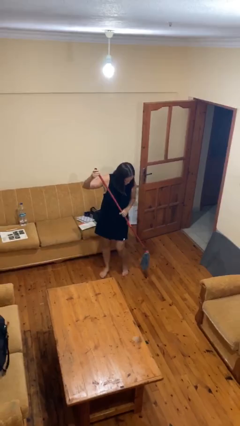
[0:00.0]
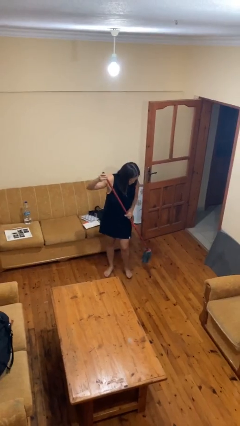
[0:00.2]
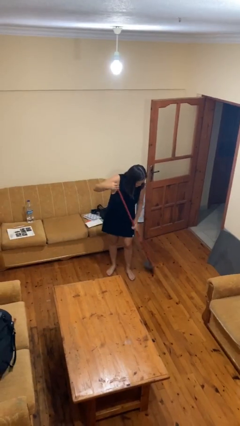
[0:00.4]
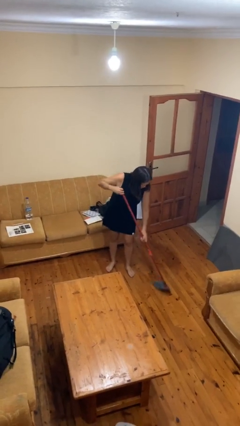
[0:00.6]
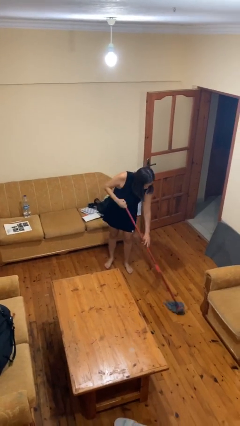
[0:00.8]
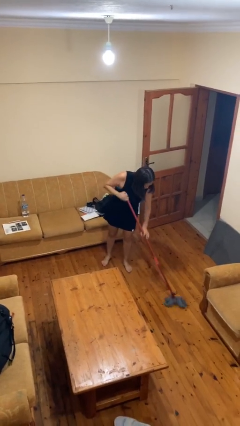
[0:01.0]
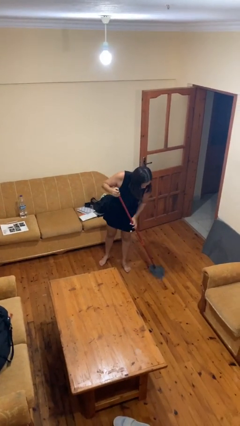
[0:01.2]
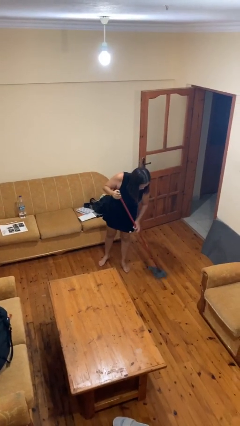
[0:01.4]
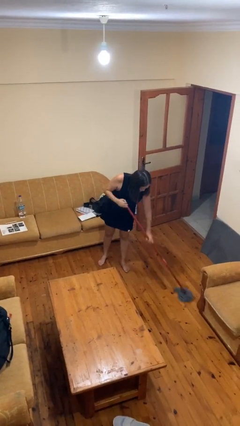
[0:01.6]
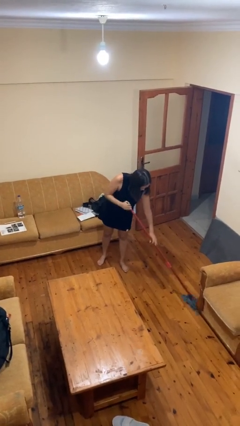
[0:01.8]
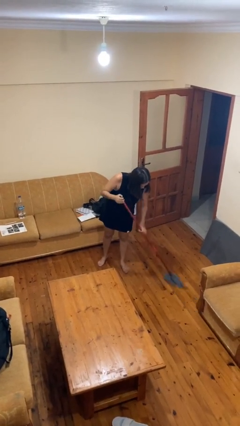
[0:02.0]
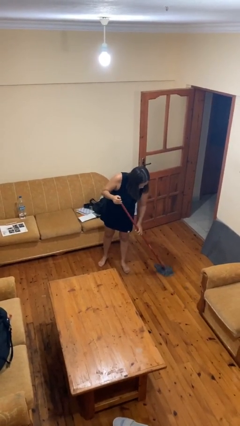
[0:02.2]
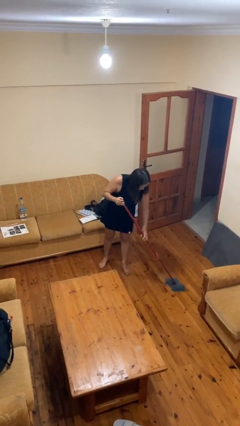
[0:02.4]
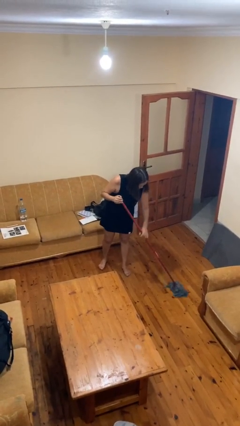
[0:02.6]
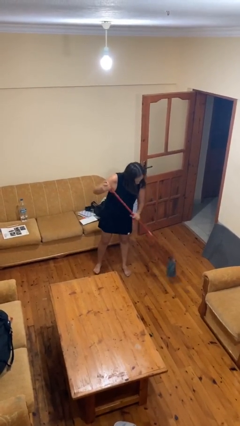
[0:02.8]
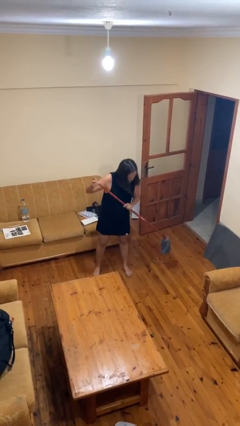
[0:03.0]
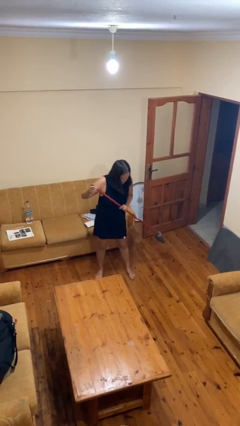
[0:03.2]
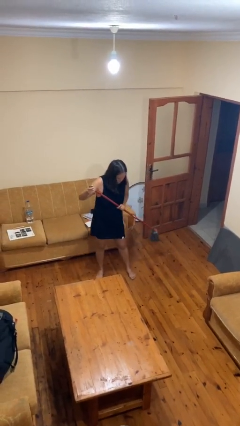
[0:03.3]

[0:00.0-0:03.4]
person mops

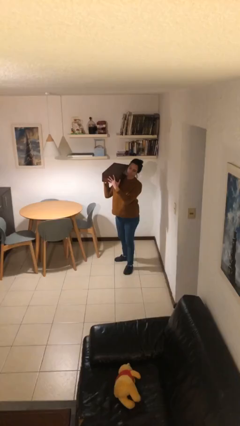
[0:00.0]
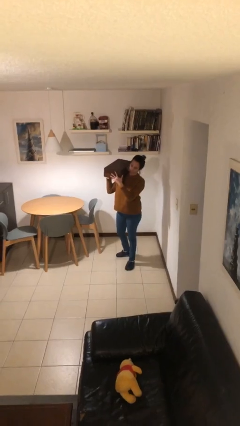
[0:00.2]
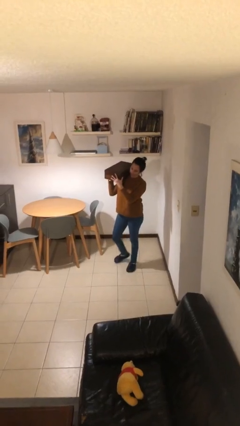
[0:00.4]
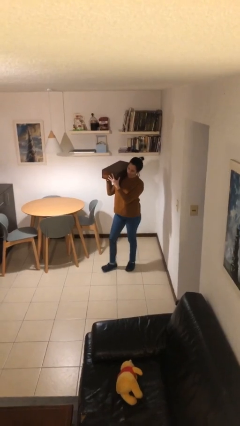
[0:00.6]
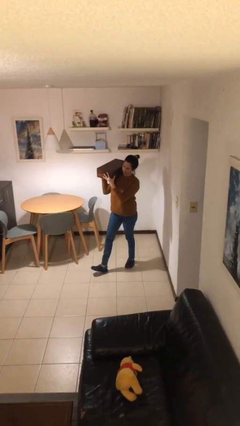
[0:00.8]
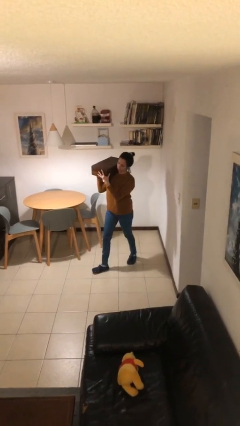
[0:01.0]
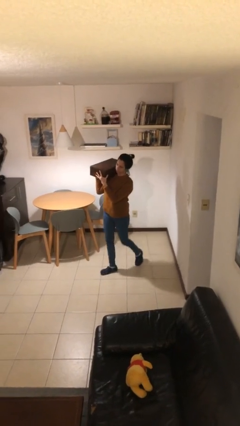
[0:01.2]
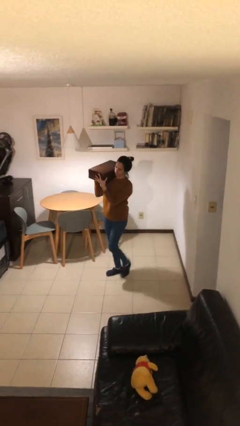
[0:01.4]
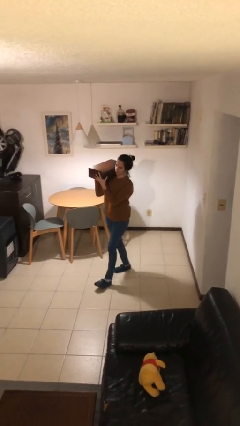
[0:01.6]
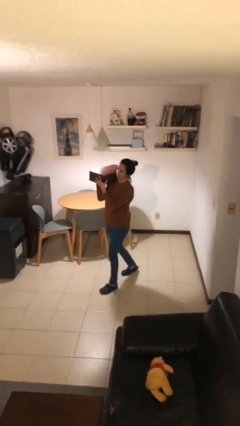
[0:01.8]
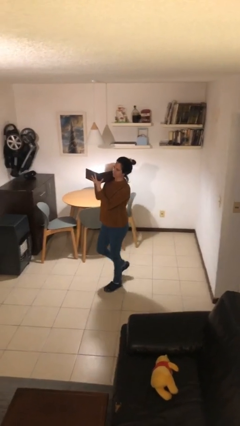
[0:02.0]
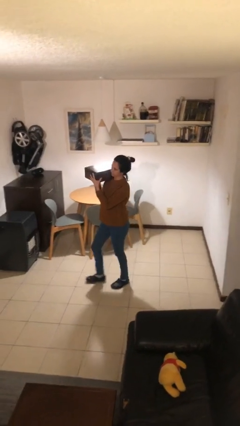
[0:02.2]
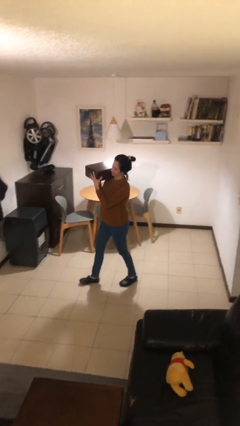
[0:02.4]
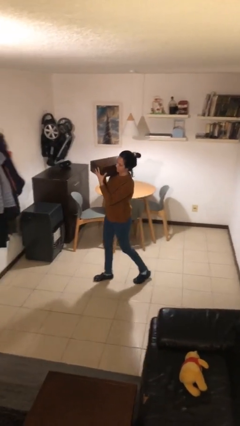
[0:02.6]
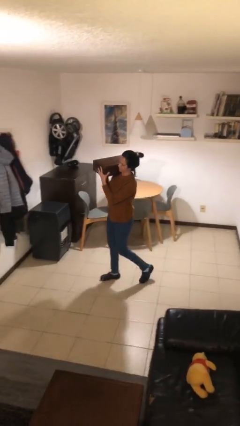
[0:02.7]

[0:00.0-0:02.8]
person carries heavy object

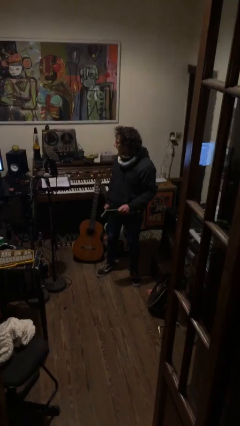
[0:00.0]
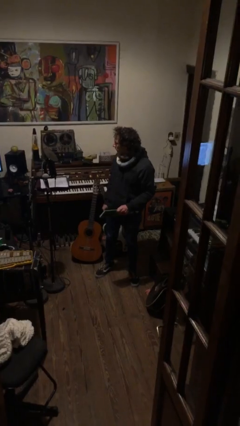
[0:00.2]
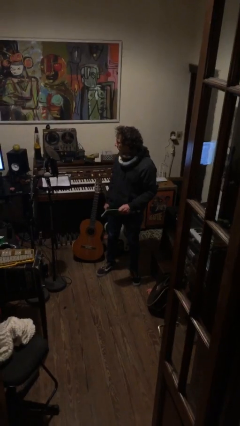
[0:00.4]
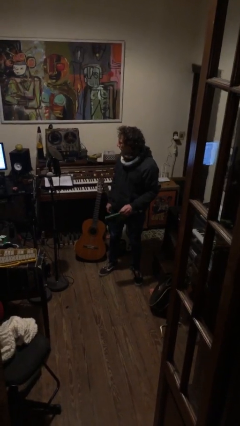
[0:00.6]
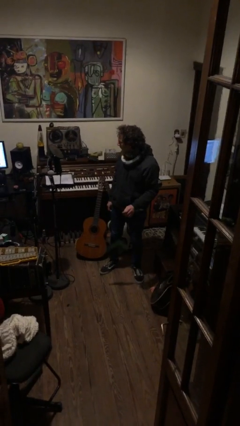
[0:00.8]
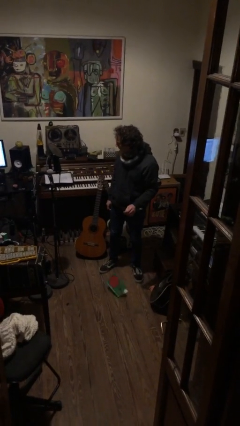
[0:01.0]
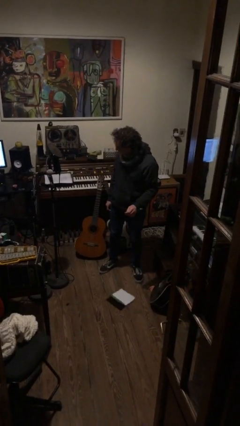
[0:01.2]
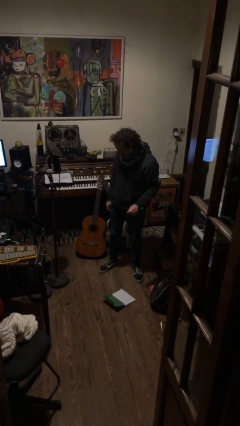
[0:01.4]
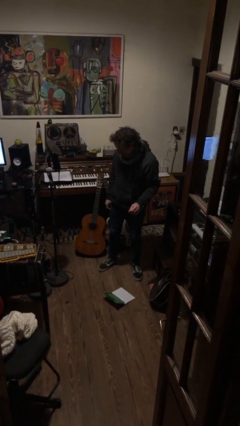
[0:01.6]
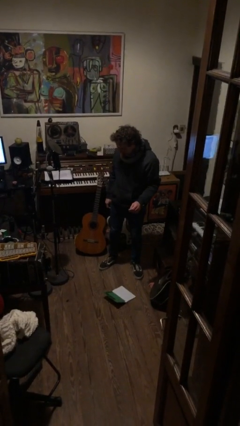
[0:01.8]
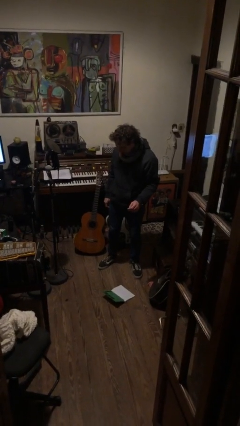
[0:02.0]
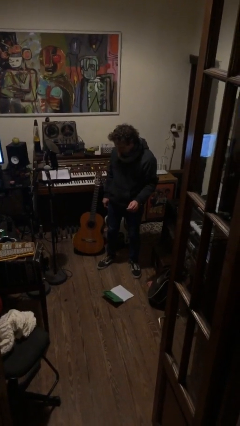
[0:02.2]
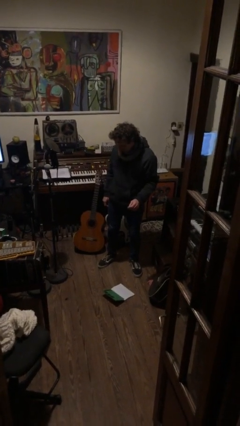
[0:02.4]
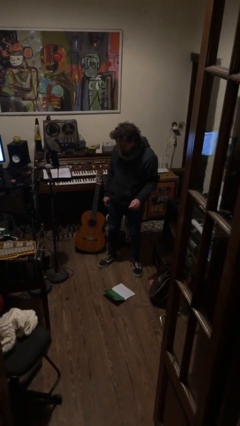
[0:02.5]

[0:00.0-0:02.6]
person drops object

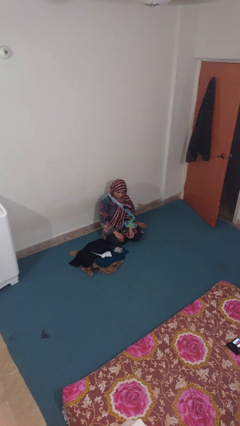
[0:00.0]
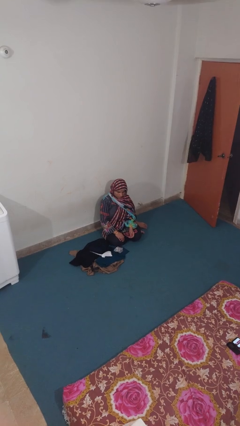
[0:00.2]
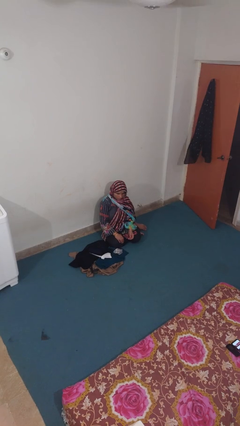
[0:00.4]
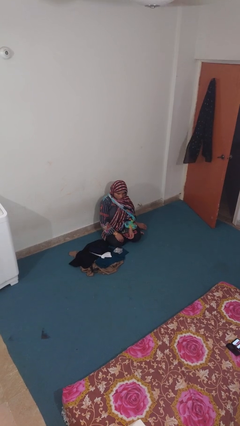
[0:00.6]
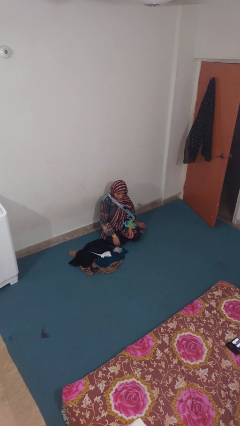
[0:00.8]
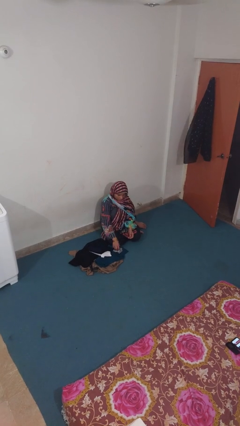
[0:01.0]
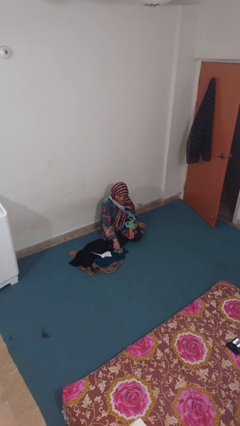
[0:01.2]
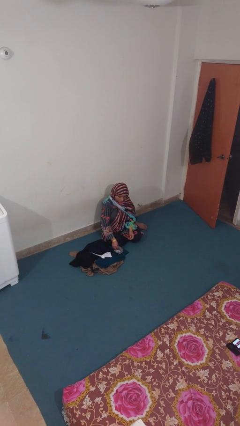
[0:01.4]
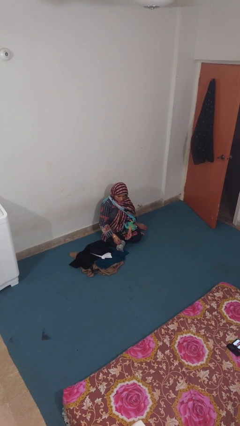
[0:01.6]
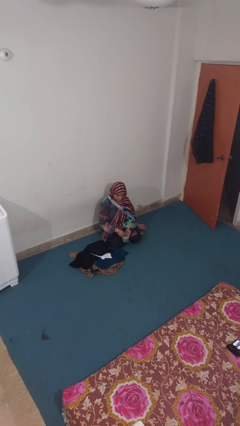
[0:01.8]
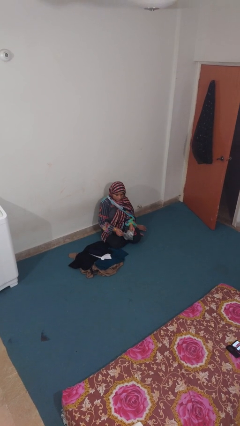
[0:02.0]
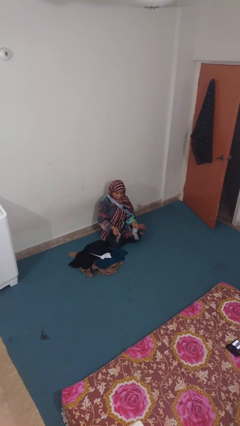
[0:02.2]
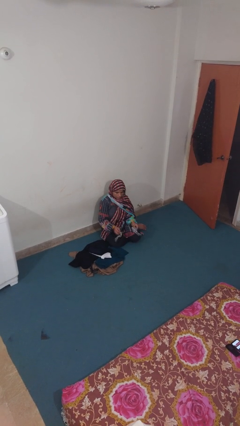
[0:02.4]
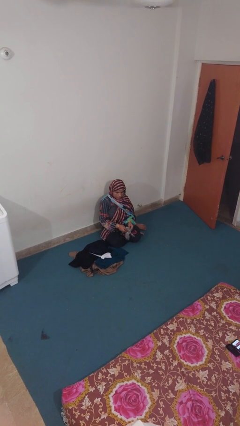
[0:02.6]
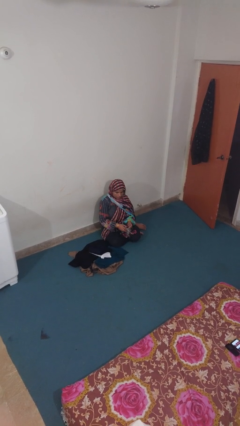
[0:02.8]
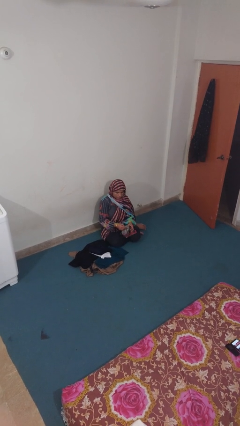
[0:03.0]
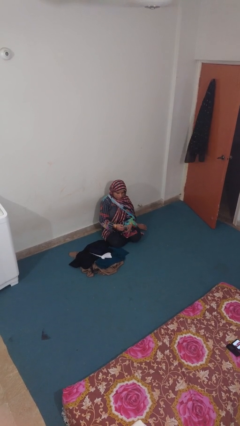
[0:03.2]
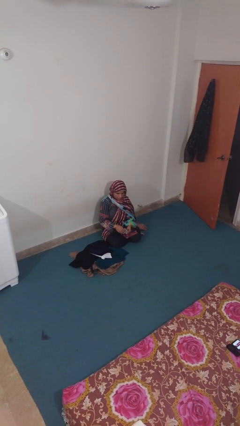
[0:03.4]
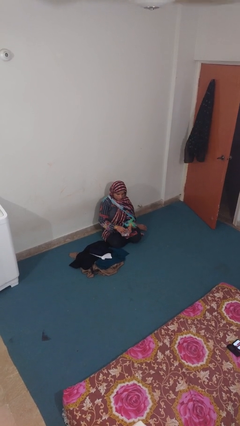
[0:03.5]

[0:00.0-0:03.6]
person folds socks

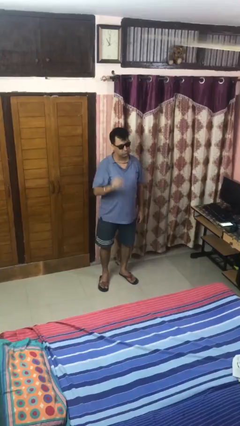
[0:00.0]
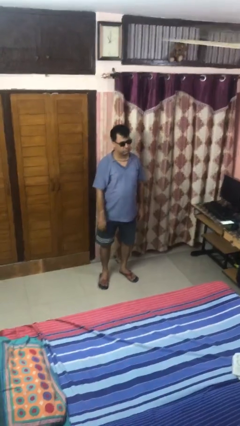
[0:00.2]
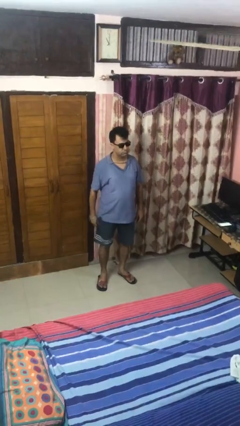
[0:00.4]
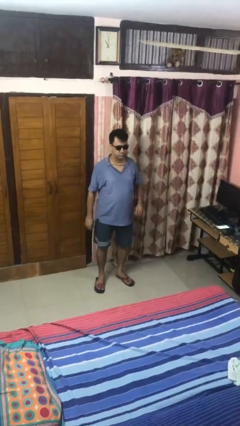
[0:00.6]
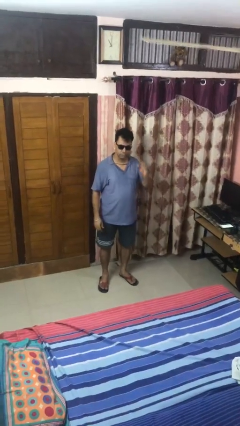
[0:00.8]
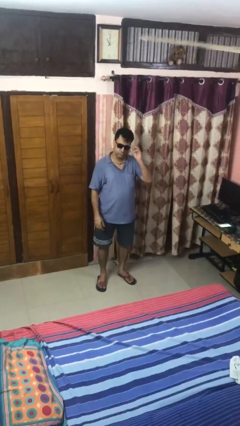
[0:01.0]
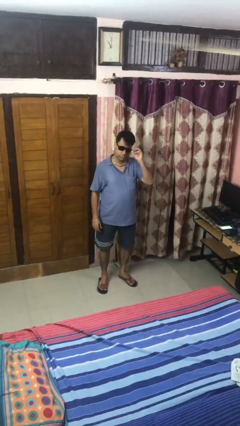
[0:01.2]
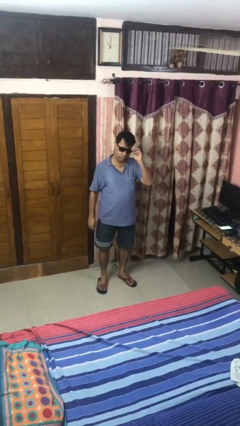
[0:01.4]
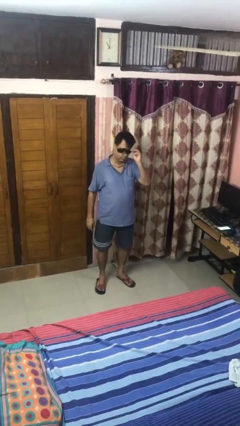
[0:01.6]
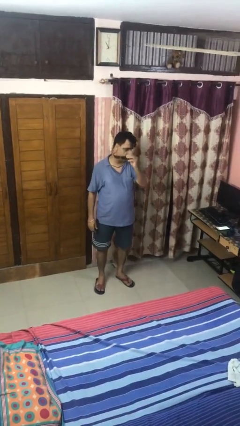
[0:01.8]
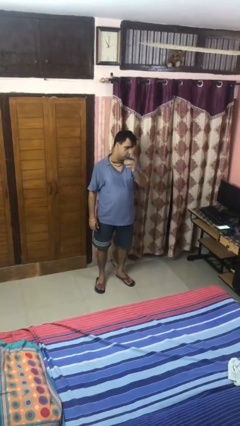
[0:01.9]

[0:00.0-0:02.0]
person takes off sunglasses

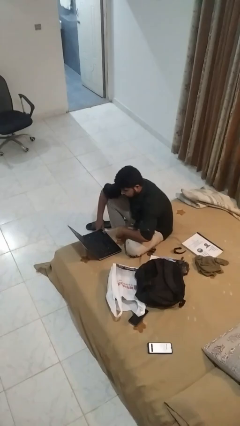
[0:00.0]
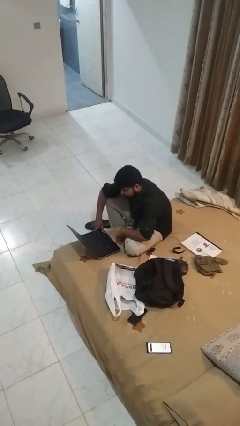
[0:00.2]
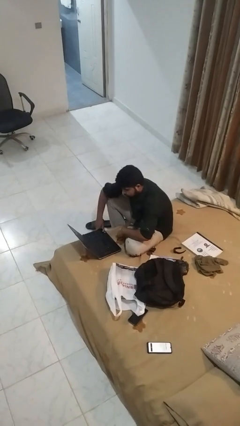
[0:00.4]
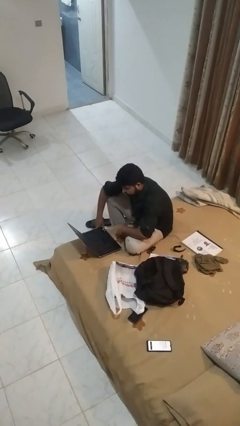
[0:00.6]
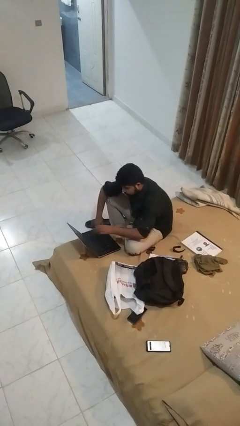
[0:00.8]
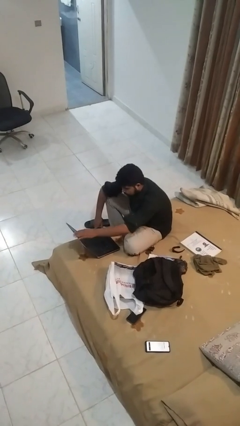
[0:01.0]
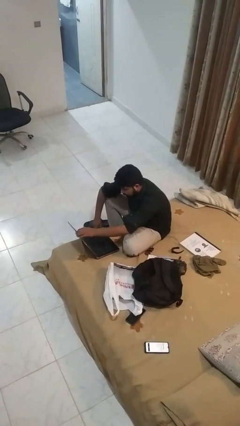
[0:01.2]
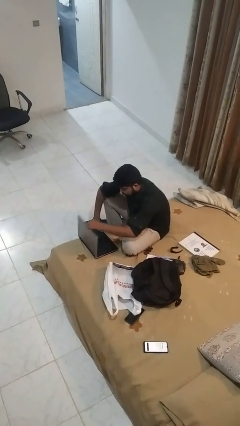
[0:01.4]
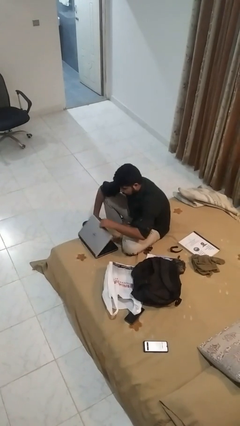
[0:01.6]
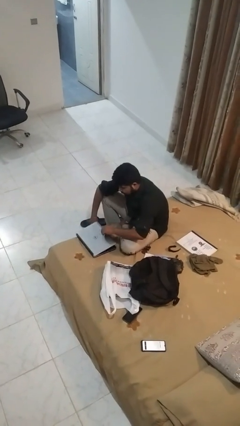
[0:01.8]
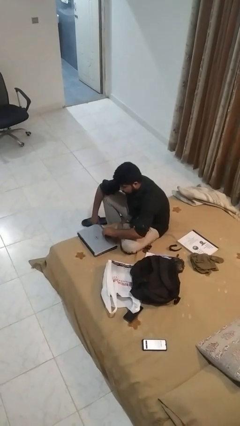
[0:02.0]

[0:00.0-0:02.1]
person closes laptop

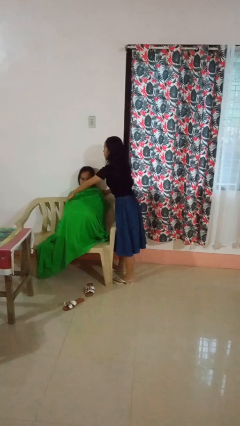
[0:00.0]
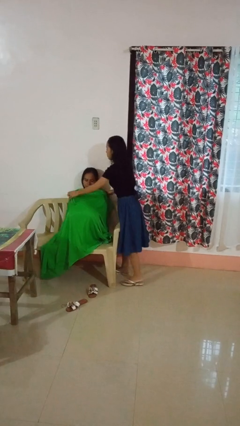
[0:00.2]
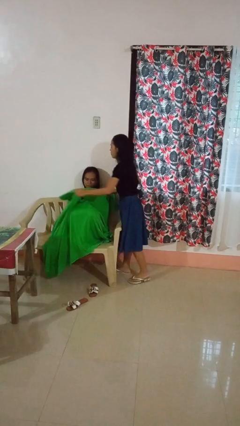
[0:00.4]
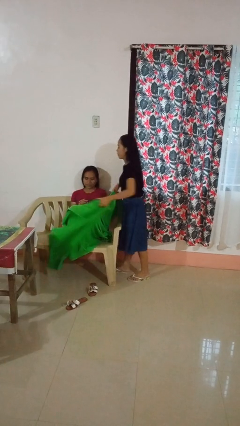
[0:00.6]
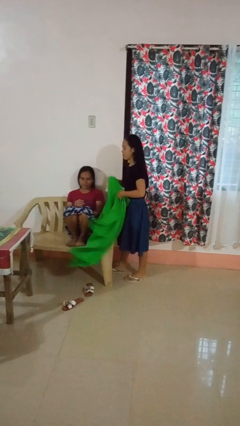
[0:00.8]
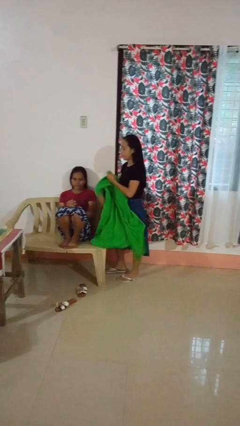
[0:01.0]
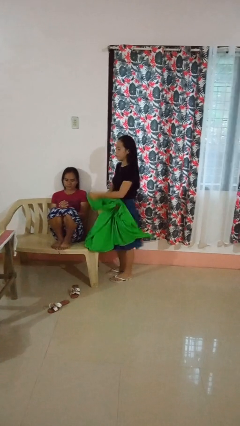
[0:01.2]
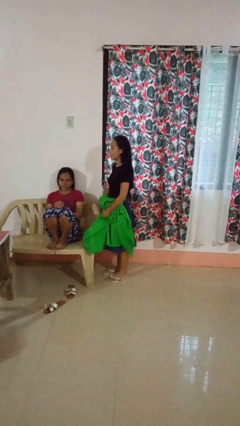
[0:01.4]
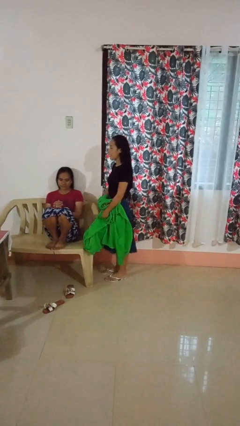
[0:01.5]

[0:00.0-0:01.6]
person uncovers friend with blanket
